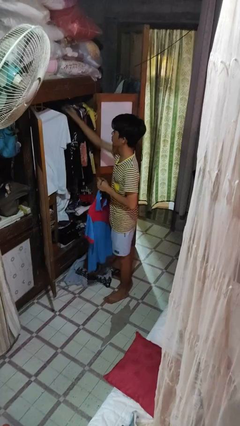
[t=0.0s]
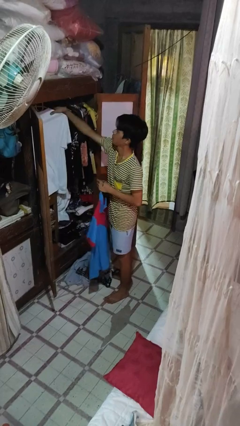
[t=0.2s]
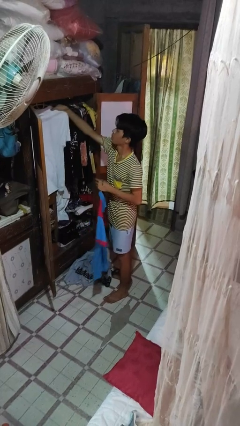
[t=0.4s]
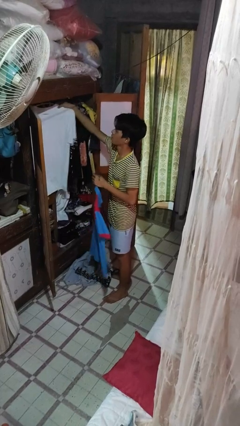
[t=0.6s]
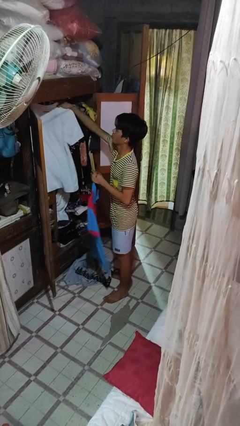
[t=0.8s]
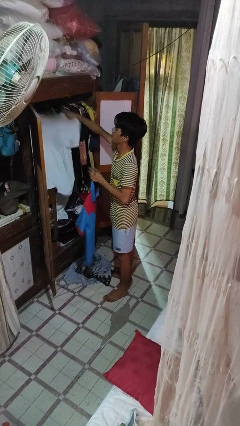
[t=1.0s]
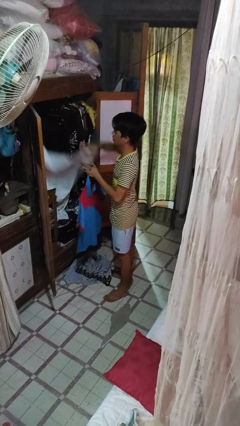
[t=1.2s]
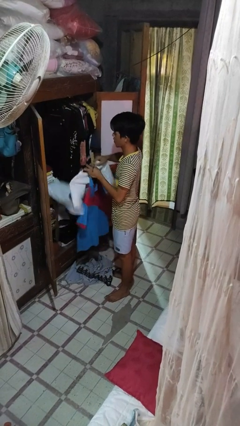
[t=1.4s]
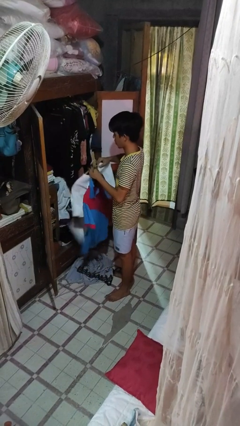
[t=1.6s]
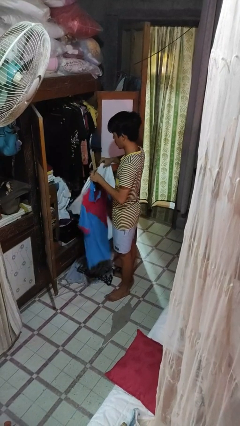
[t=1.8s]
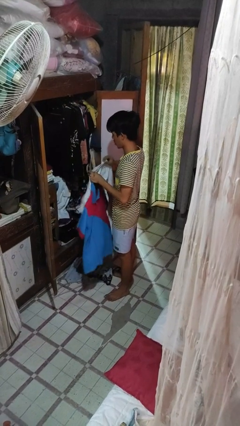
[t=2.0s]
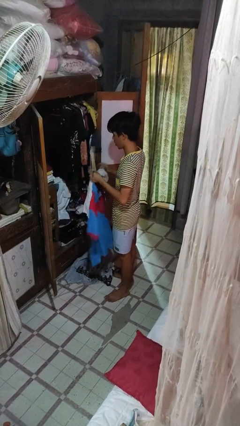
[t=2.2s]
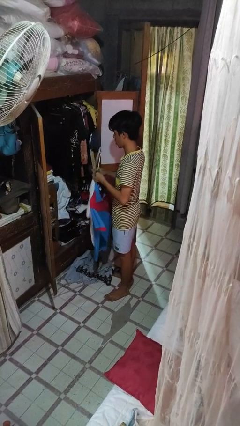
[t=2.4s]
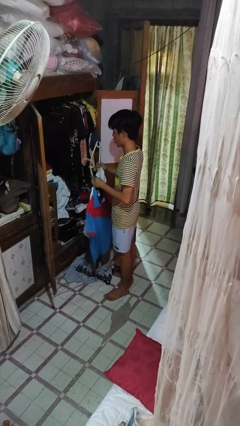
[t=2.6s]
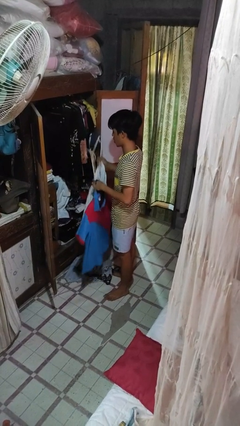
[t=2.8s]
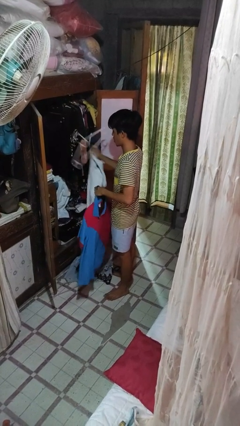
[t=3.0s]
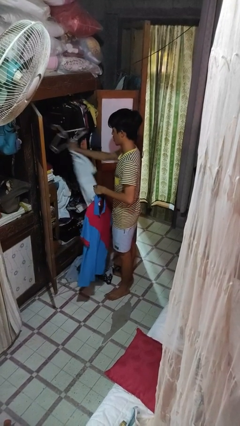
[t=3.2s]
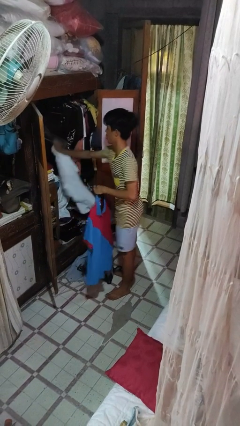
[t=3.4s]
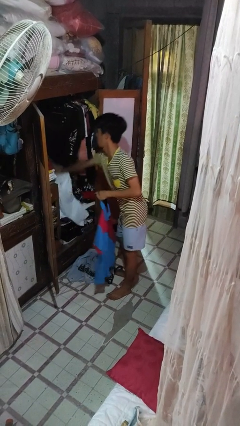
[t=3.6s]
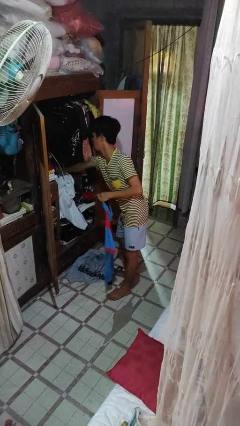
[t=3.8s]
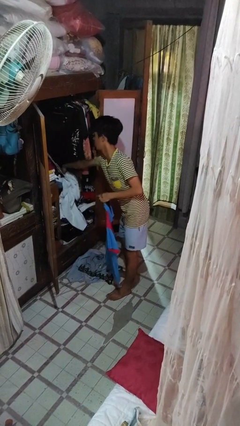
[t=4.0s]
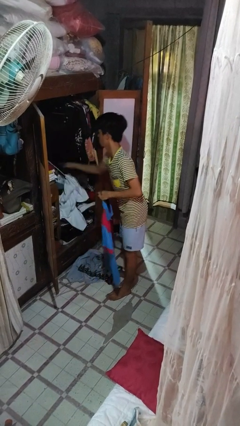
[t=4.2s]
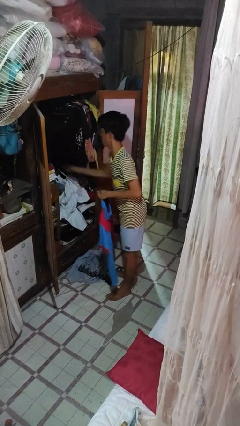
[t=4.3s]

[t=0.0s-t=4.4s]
person takes clothes from closet

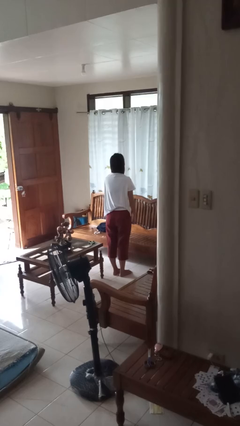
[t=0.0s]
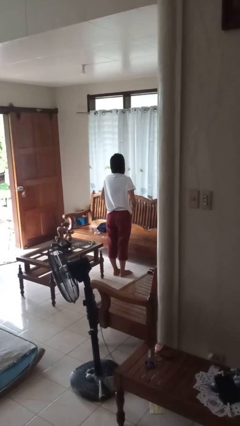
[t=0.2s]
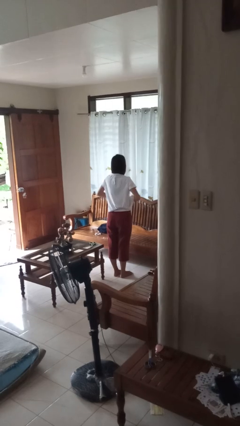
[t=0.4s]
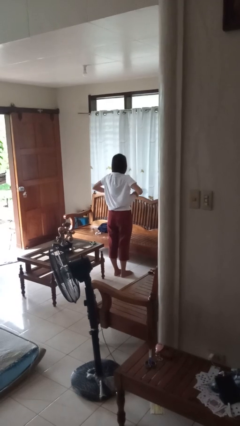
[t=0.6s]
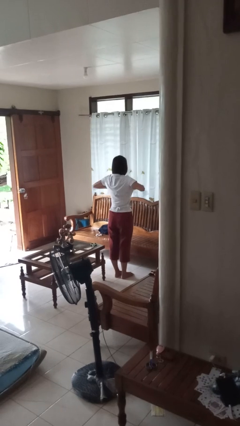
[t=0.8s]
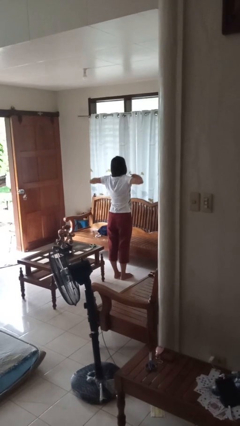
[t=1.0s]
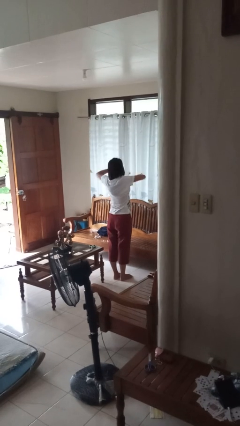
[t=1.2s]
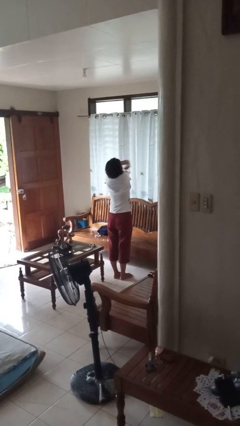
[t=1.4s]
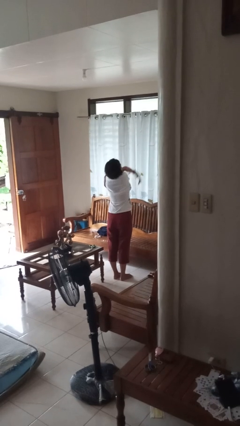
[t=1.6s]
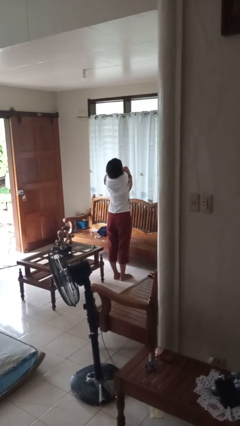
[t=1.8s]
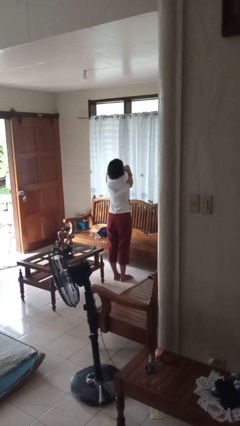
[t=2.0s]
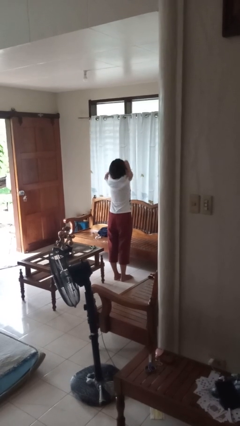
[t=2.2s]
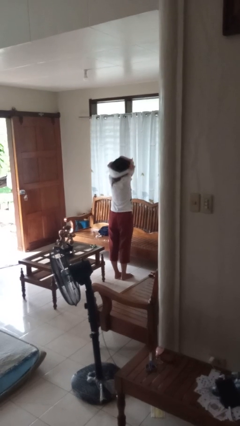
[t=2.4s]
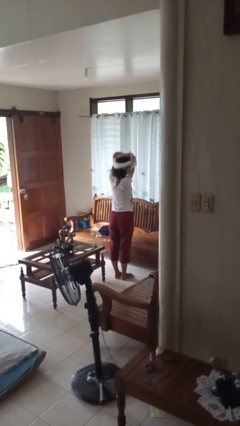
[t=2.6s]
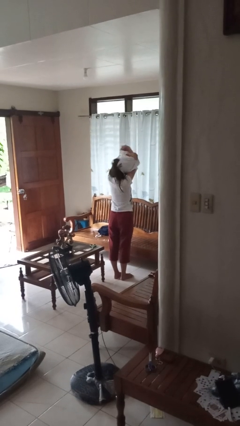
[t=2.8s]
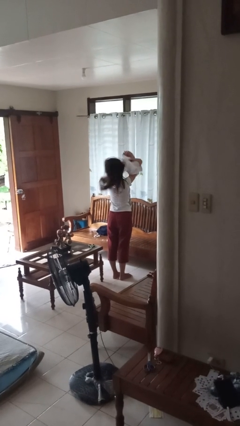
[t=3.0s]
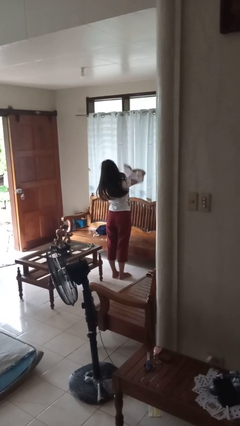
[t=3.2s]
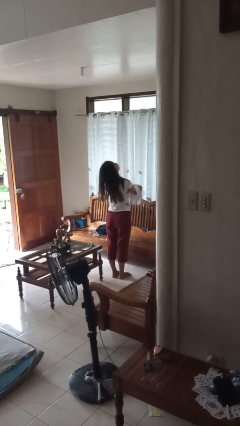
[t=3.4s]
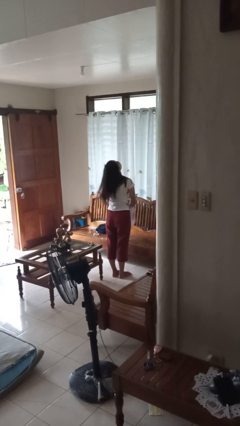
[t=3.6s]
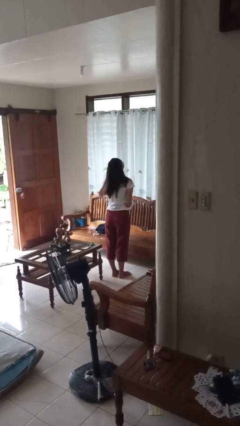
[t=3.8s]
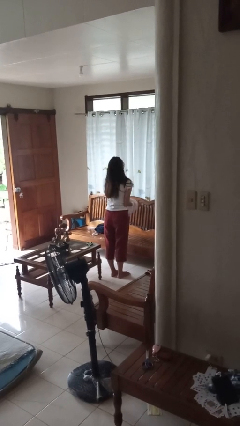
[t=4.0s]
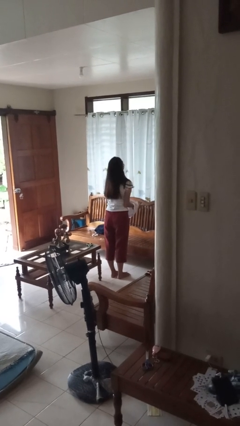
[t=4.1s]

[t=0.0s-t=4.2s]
person takes off shirt

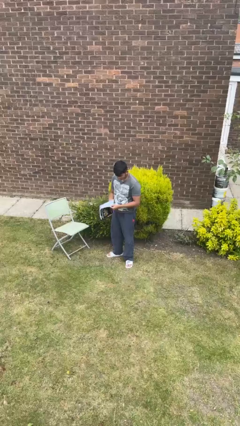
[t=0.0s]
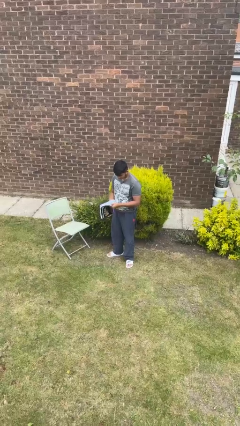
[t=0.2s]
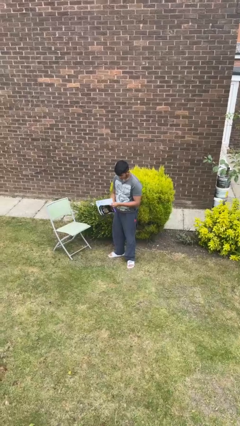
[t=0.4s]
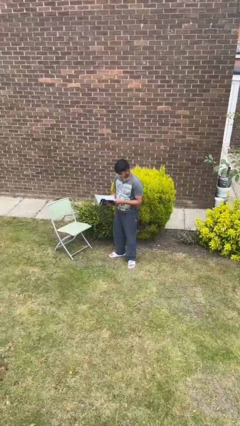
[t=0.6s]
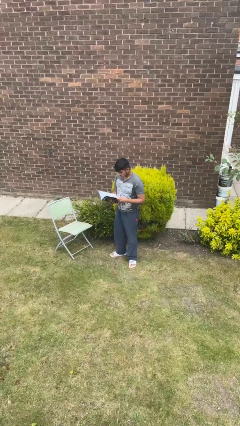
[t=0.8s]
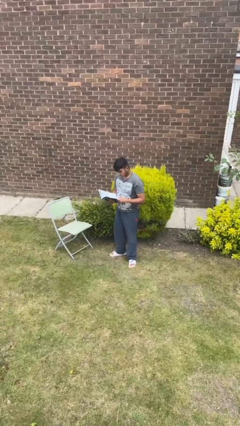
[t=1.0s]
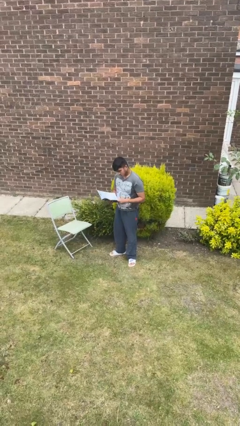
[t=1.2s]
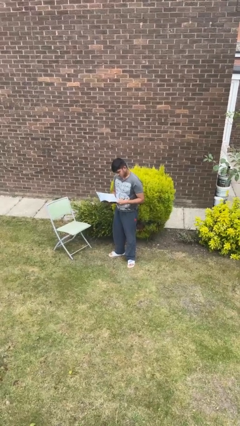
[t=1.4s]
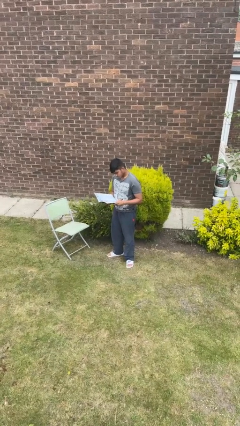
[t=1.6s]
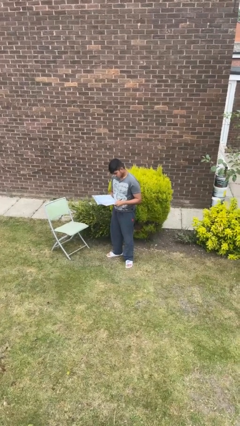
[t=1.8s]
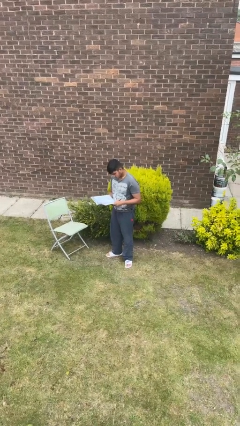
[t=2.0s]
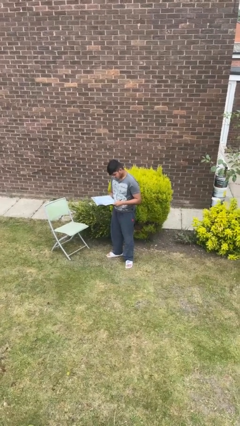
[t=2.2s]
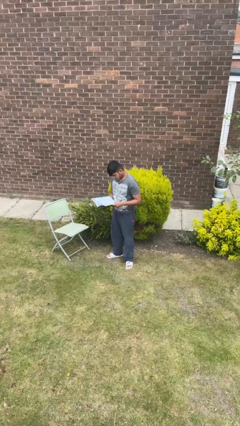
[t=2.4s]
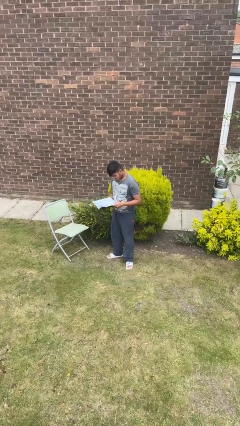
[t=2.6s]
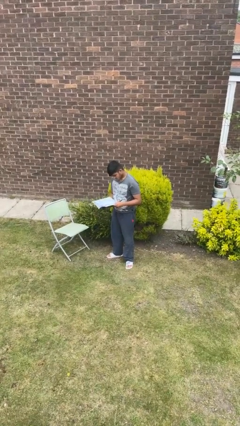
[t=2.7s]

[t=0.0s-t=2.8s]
person reads book

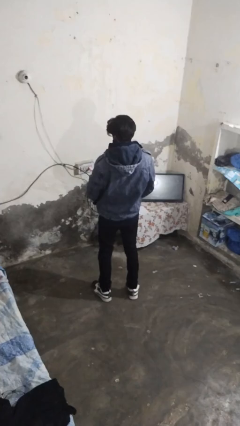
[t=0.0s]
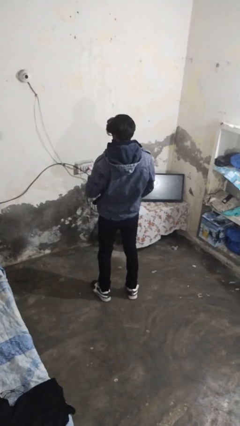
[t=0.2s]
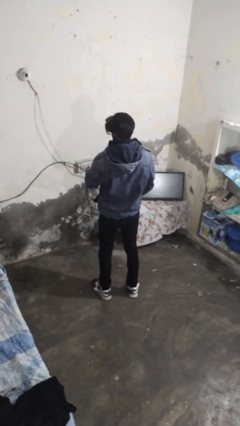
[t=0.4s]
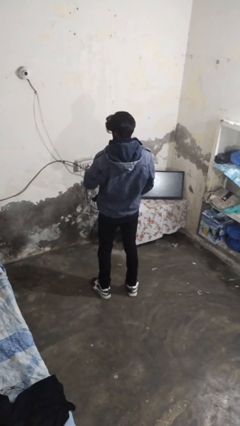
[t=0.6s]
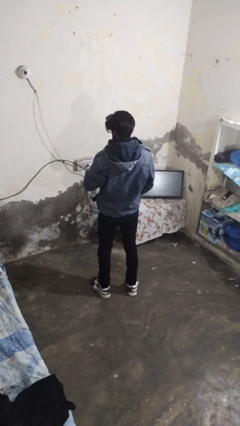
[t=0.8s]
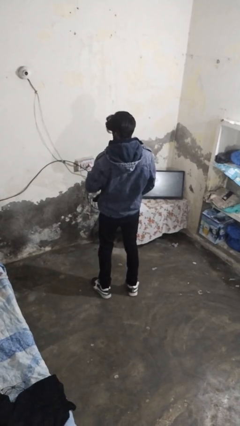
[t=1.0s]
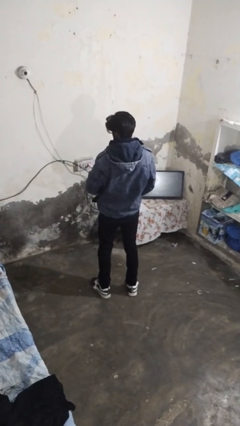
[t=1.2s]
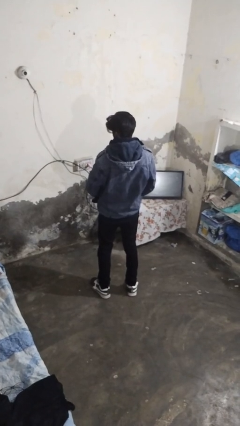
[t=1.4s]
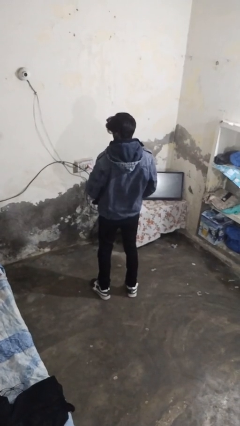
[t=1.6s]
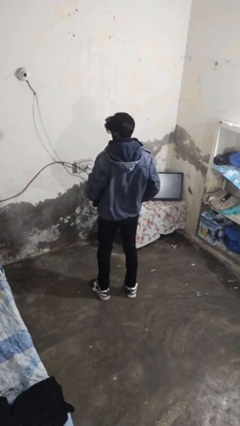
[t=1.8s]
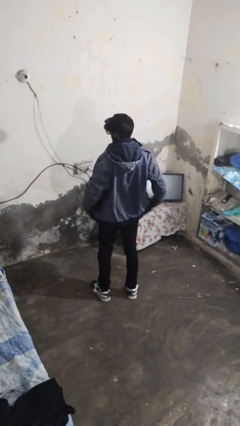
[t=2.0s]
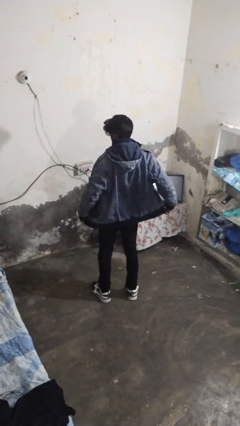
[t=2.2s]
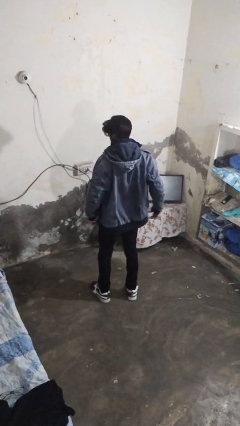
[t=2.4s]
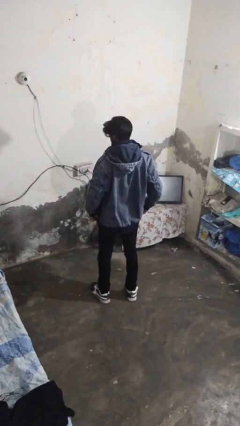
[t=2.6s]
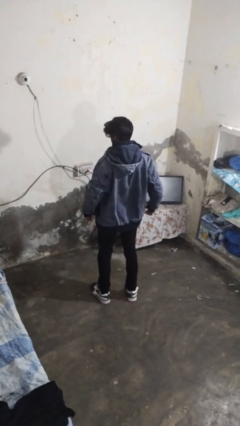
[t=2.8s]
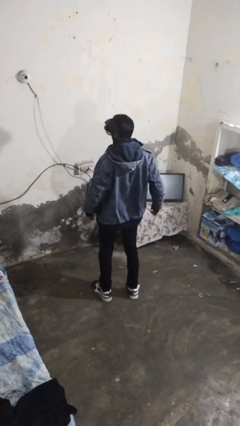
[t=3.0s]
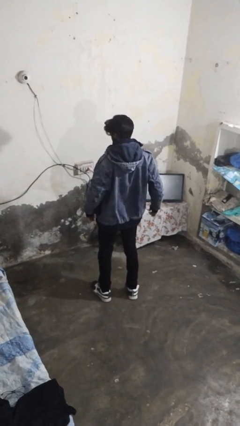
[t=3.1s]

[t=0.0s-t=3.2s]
person unzips jacket

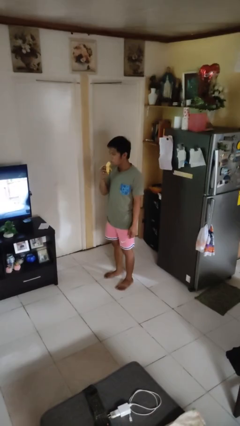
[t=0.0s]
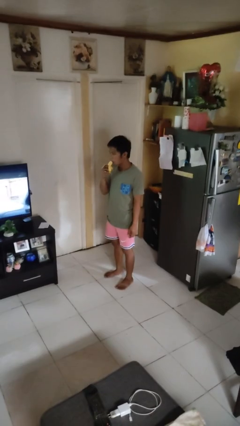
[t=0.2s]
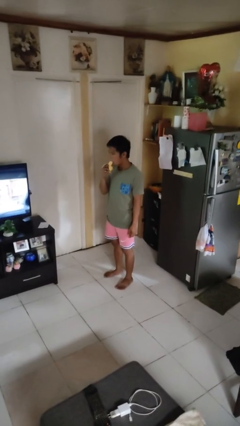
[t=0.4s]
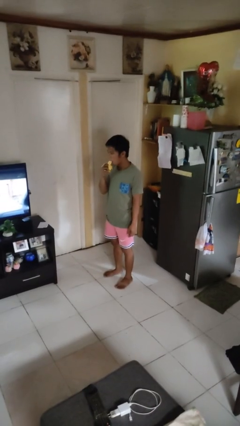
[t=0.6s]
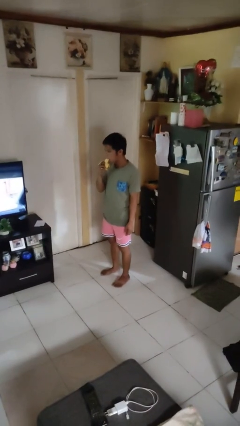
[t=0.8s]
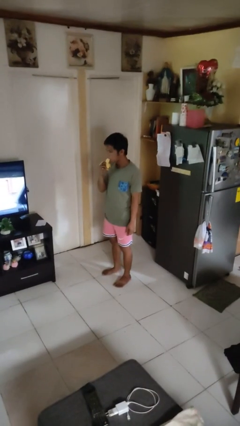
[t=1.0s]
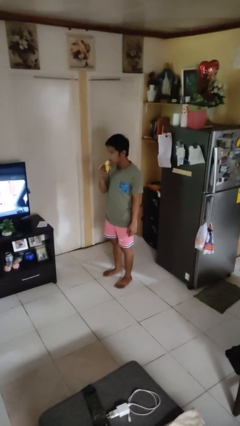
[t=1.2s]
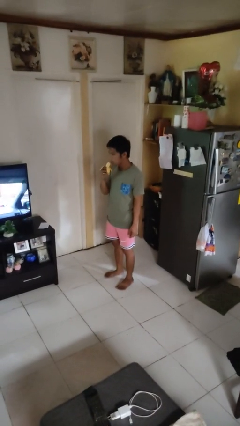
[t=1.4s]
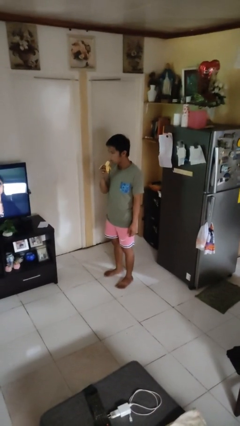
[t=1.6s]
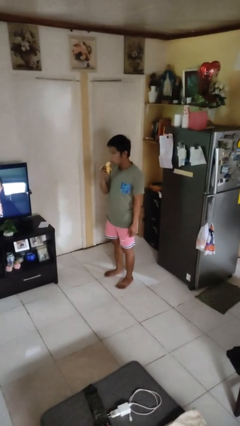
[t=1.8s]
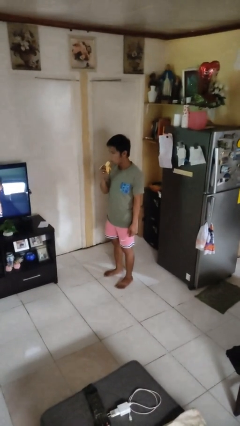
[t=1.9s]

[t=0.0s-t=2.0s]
person eats banana

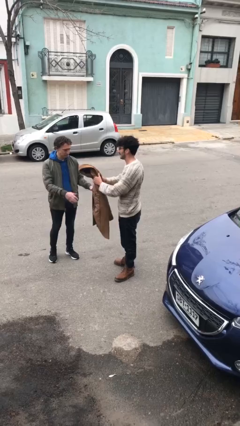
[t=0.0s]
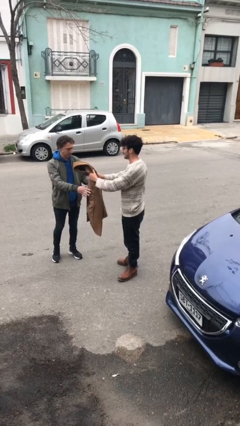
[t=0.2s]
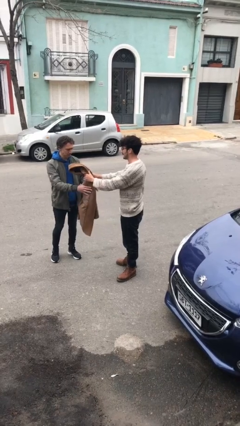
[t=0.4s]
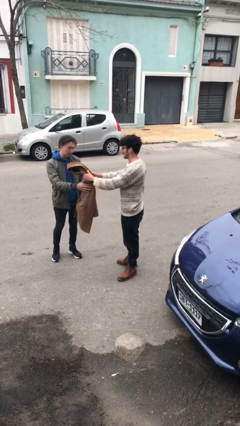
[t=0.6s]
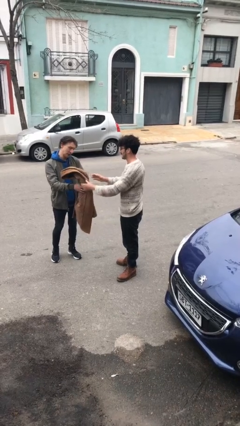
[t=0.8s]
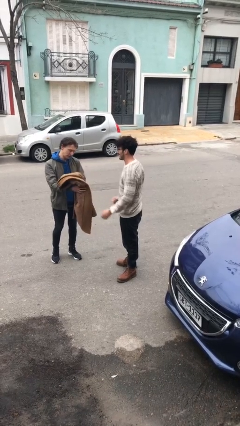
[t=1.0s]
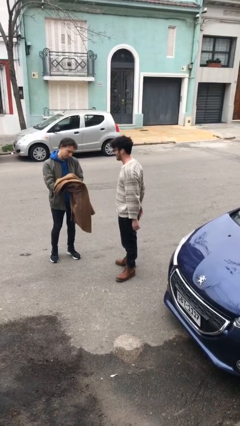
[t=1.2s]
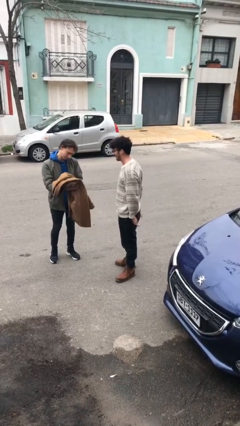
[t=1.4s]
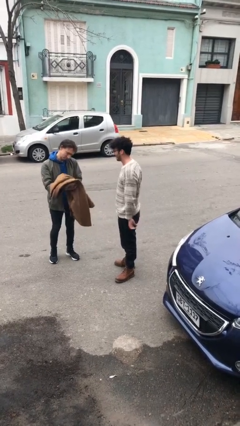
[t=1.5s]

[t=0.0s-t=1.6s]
person transfers object to person
